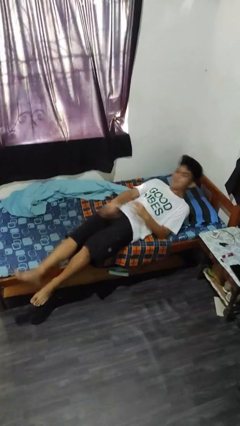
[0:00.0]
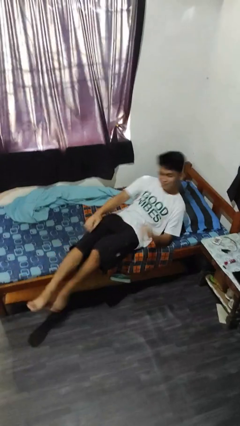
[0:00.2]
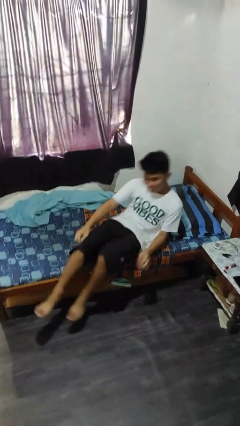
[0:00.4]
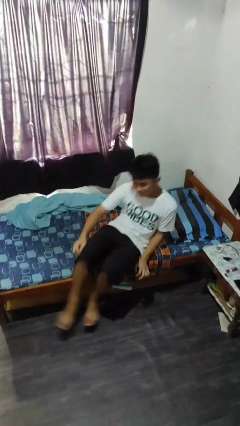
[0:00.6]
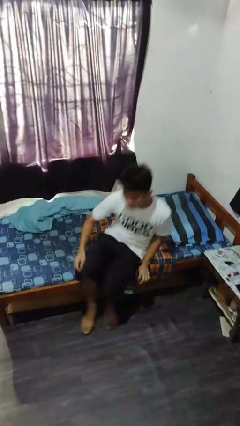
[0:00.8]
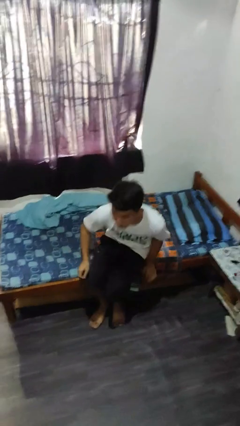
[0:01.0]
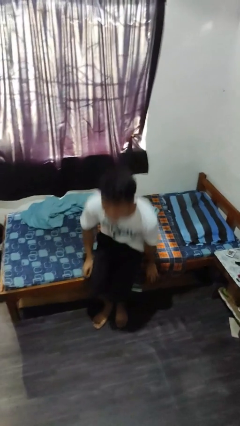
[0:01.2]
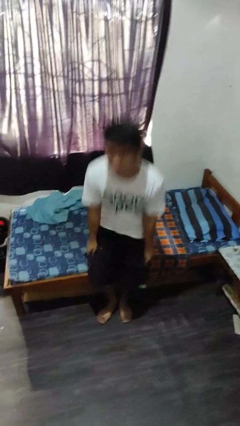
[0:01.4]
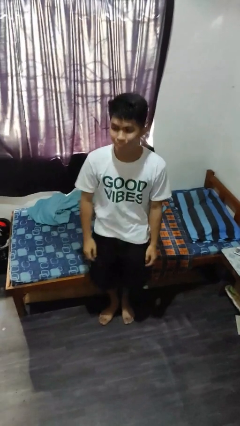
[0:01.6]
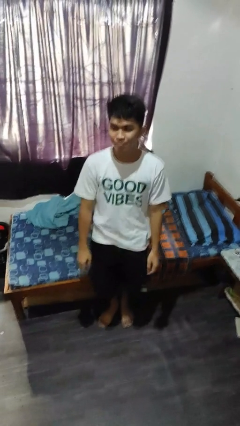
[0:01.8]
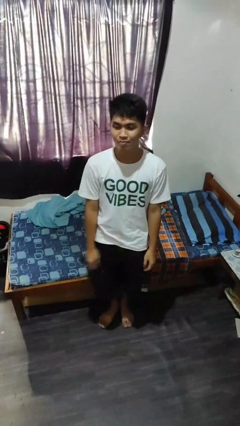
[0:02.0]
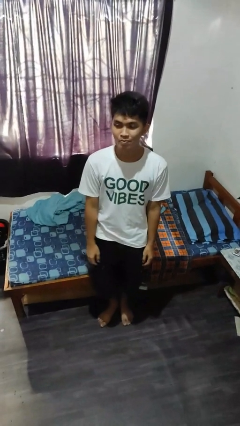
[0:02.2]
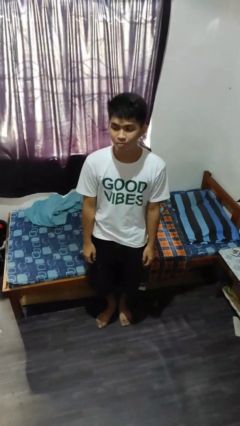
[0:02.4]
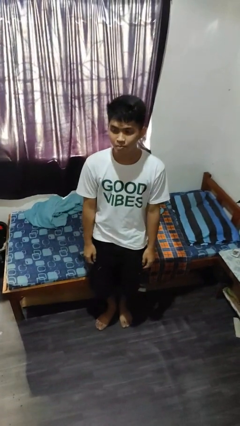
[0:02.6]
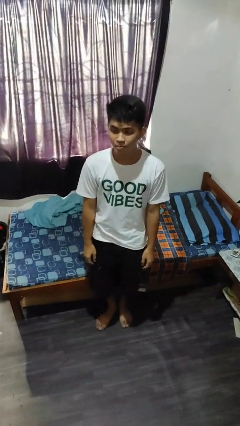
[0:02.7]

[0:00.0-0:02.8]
person stands up

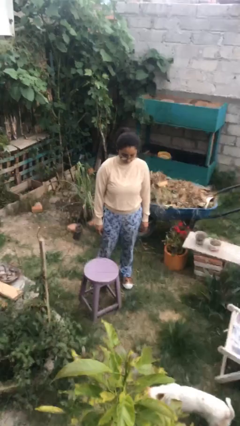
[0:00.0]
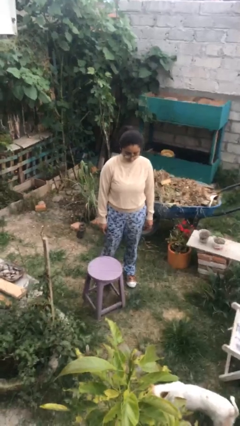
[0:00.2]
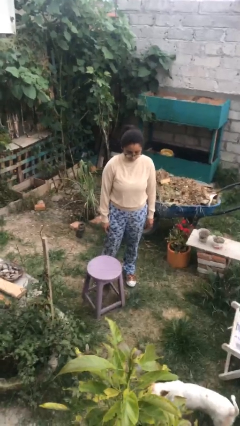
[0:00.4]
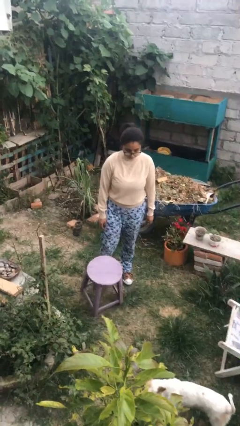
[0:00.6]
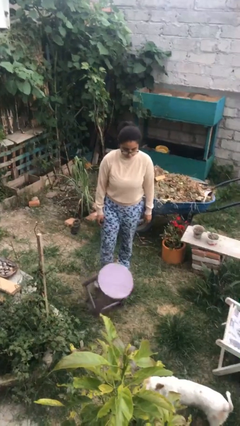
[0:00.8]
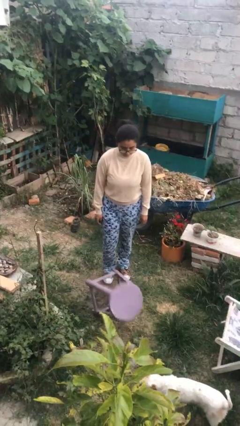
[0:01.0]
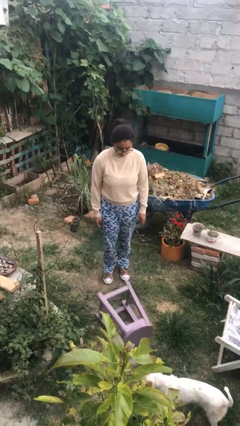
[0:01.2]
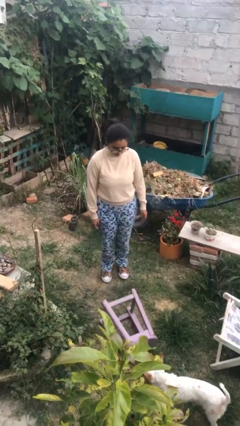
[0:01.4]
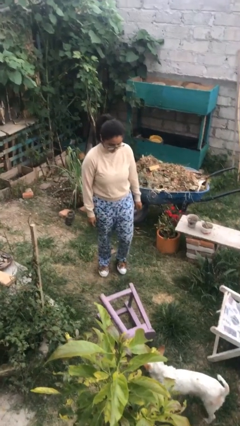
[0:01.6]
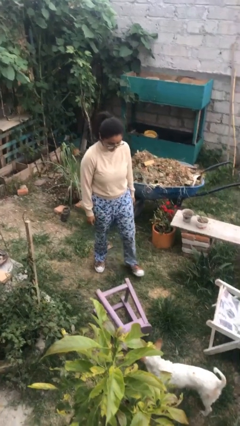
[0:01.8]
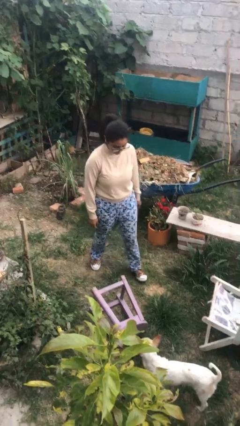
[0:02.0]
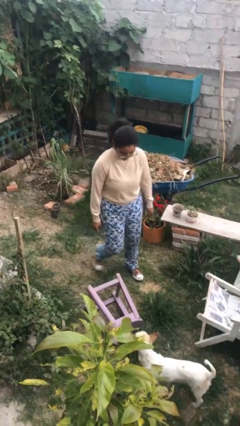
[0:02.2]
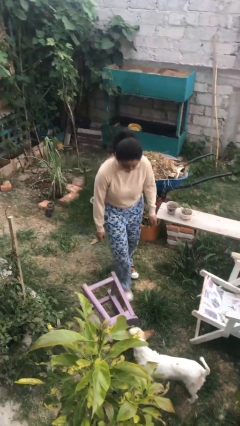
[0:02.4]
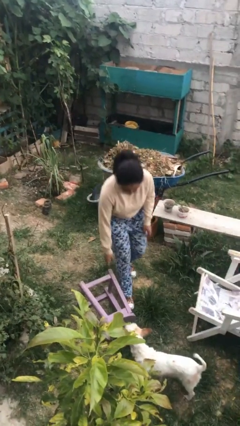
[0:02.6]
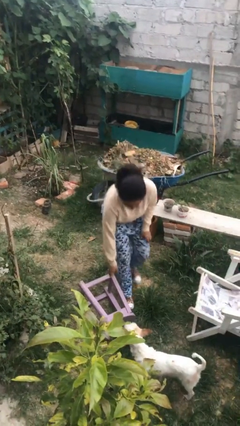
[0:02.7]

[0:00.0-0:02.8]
person knocks over furniture

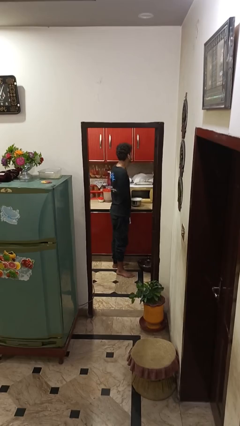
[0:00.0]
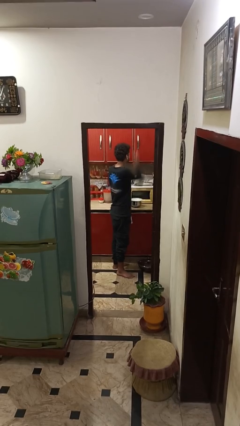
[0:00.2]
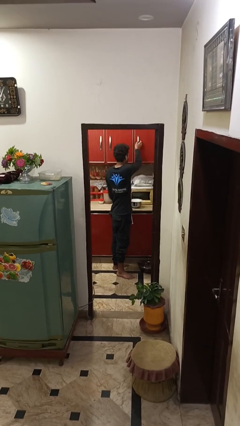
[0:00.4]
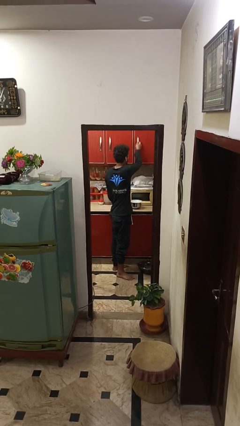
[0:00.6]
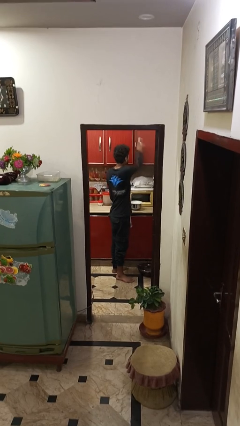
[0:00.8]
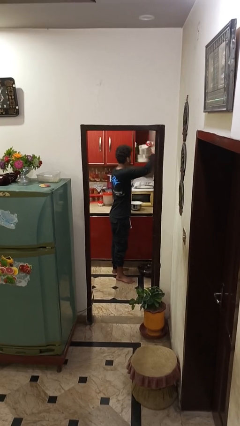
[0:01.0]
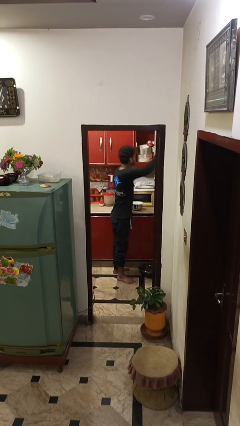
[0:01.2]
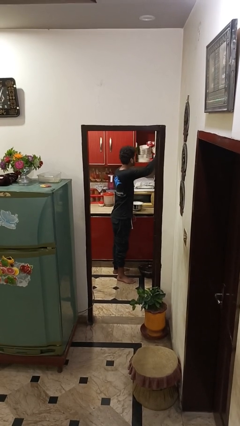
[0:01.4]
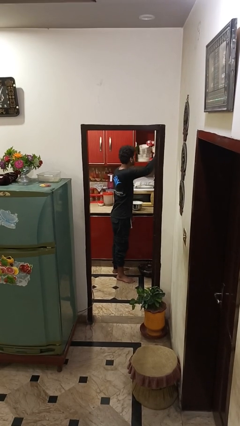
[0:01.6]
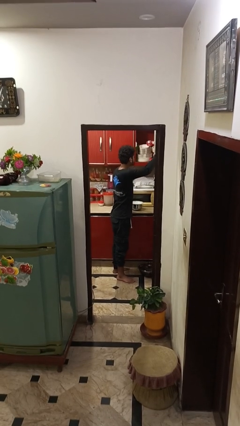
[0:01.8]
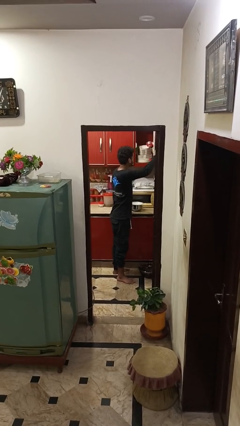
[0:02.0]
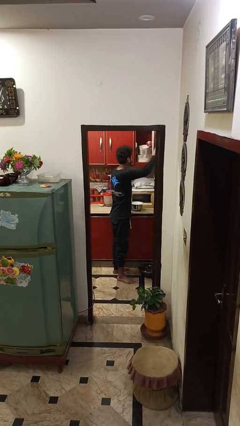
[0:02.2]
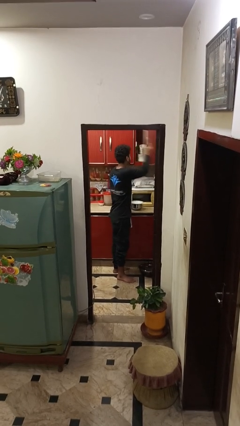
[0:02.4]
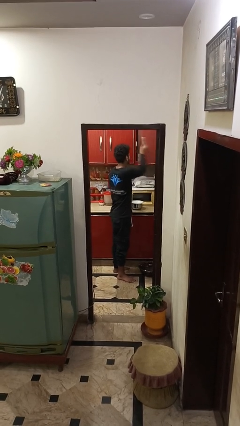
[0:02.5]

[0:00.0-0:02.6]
person opens cabinet

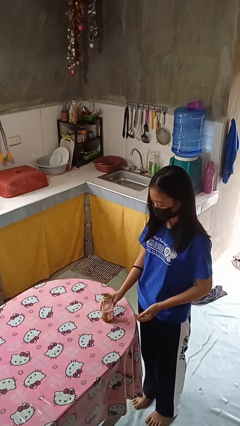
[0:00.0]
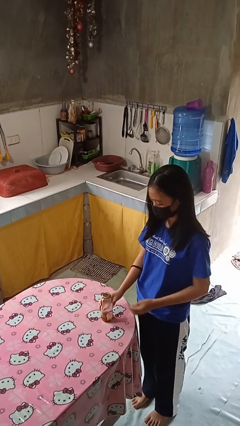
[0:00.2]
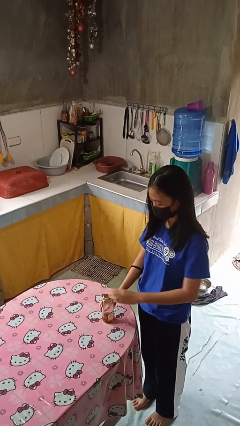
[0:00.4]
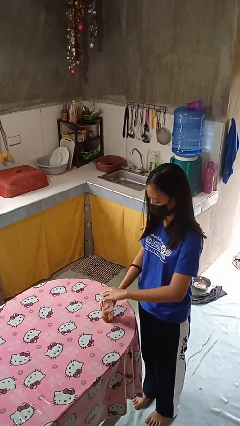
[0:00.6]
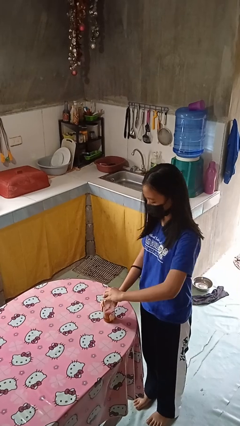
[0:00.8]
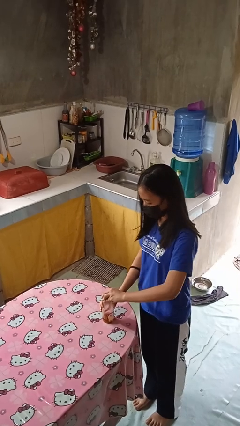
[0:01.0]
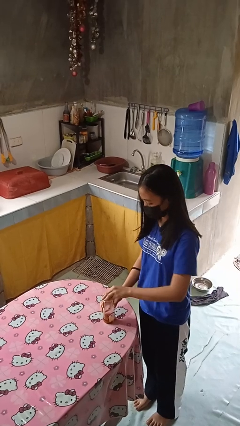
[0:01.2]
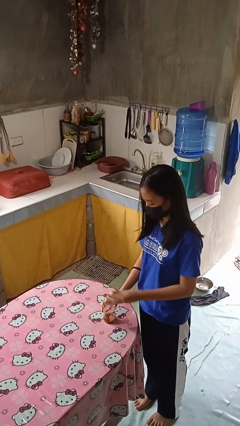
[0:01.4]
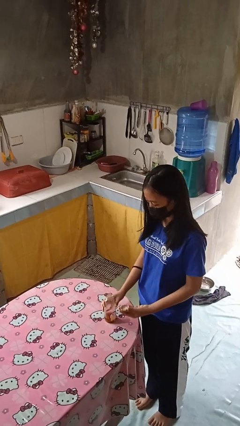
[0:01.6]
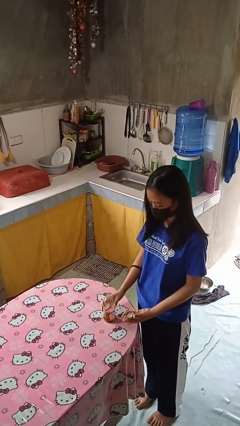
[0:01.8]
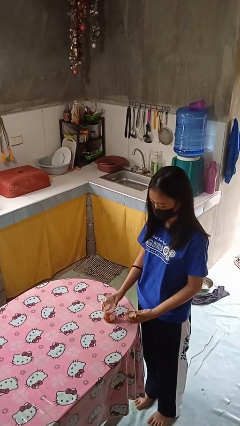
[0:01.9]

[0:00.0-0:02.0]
person opens jar

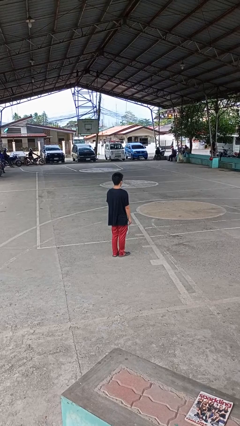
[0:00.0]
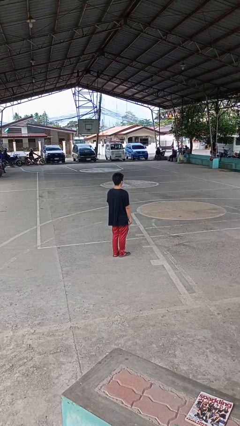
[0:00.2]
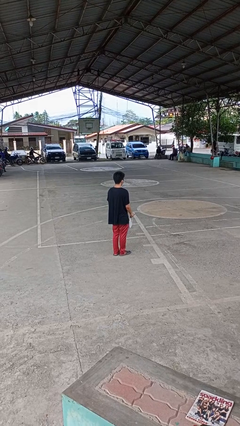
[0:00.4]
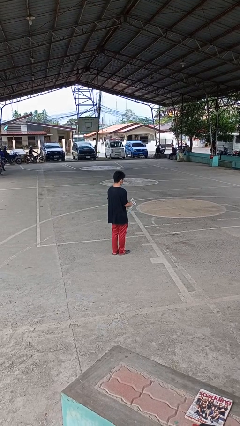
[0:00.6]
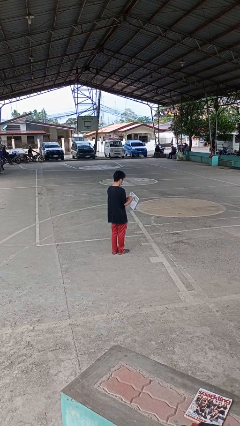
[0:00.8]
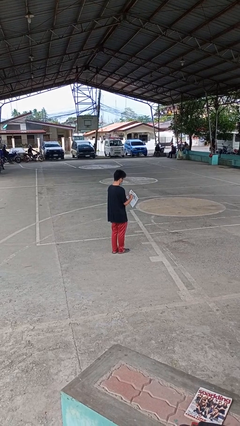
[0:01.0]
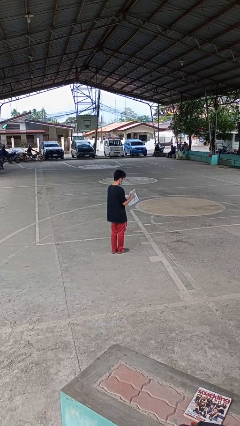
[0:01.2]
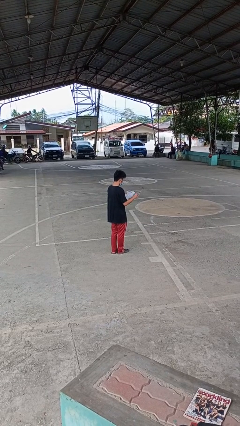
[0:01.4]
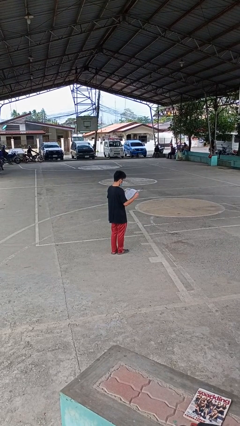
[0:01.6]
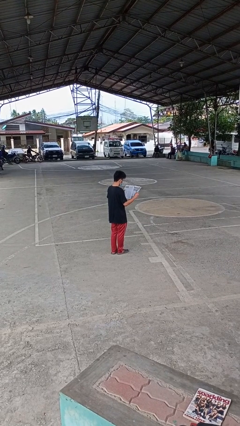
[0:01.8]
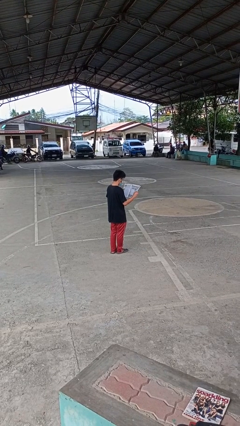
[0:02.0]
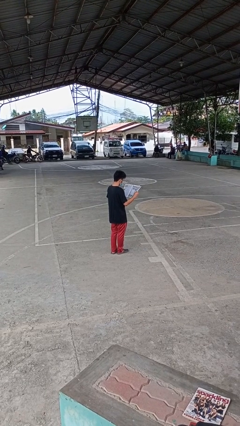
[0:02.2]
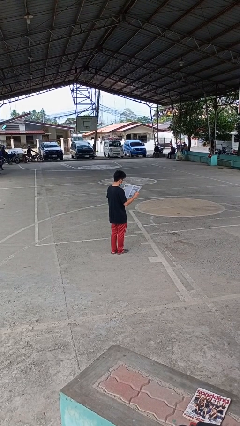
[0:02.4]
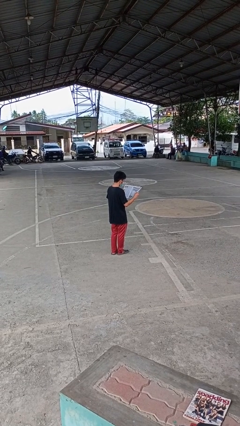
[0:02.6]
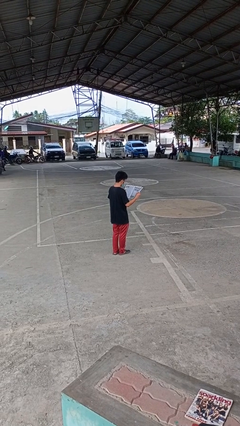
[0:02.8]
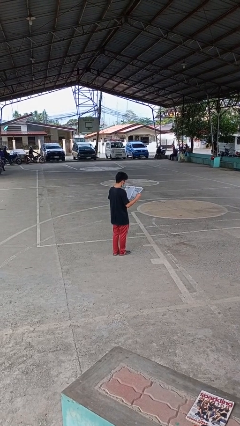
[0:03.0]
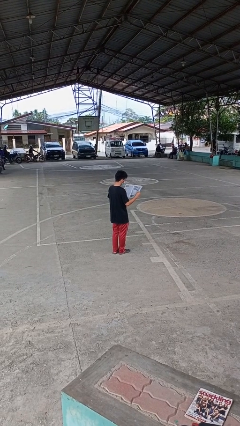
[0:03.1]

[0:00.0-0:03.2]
person reads newspaper

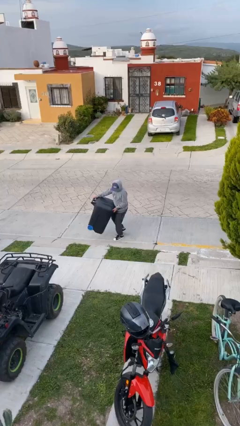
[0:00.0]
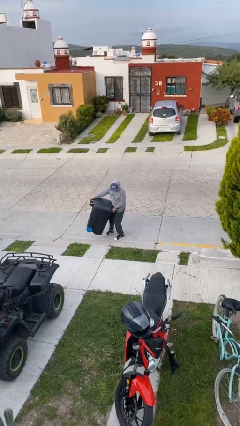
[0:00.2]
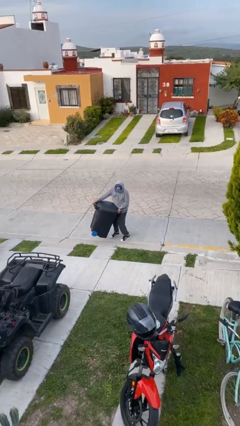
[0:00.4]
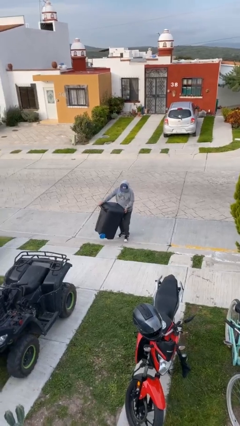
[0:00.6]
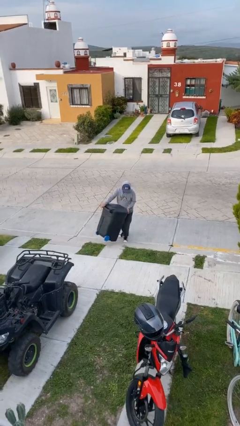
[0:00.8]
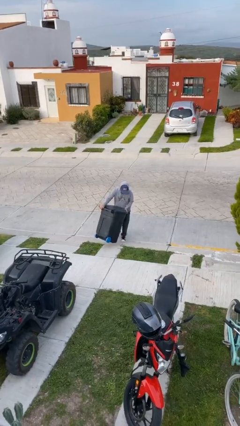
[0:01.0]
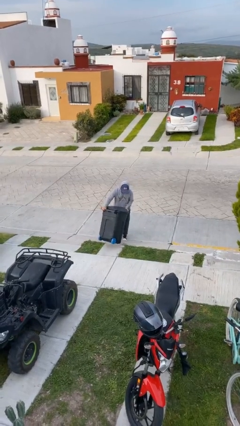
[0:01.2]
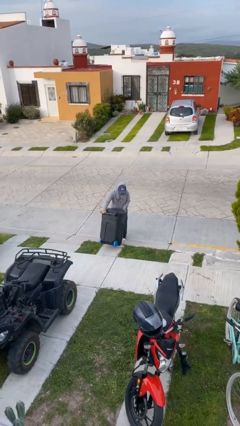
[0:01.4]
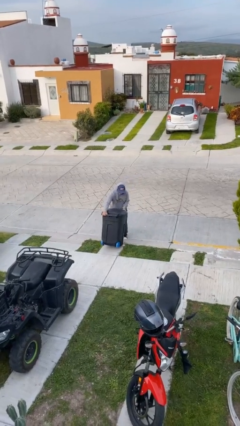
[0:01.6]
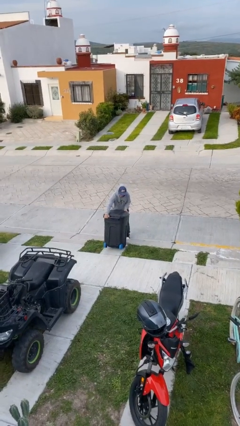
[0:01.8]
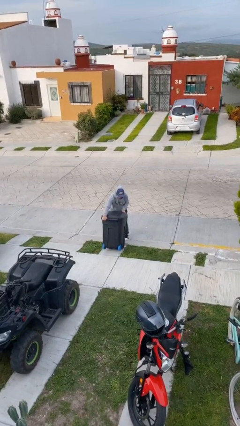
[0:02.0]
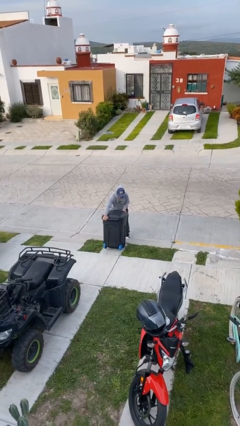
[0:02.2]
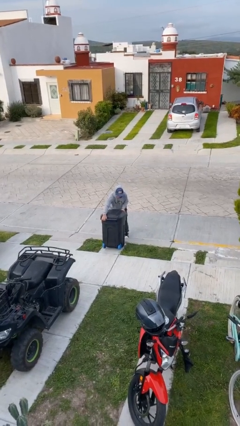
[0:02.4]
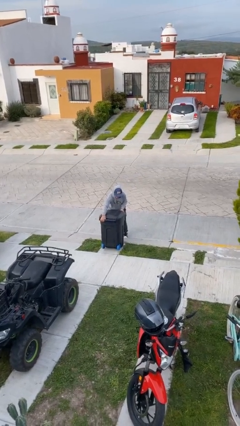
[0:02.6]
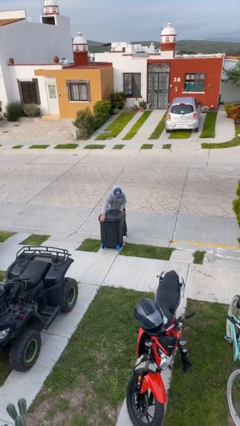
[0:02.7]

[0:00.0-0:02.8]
person puts down object on floor

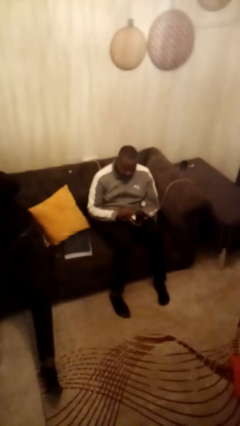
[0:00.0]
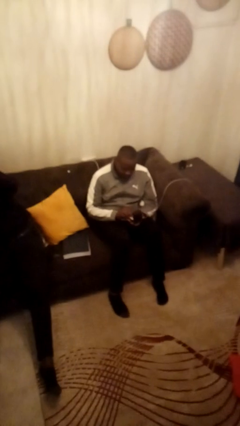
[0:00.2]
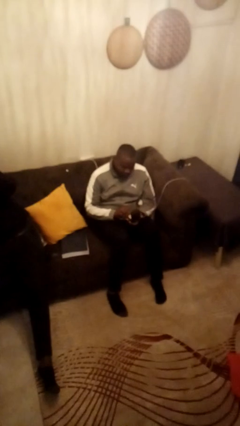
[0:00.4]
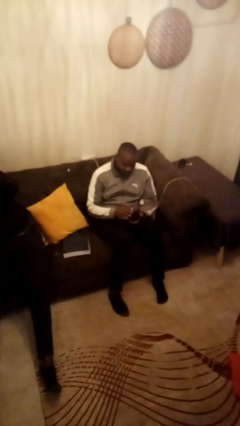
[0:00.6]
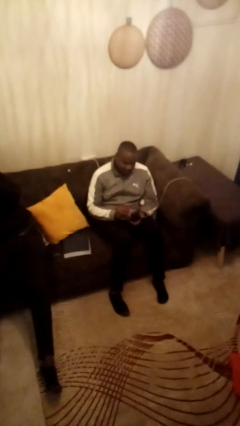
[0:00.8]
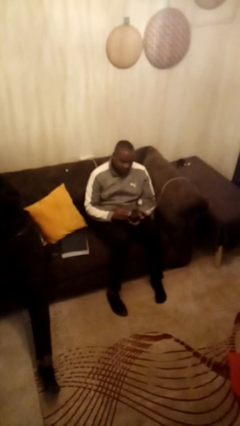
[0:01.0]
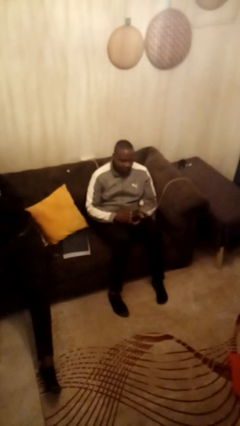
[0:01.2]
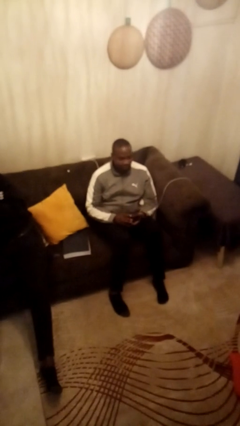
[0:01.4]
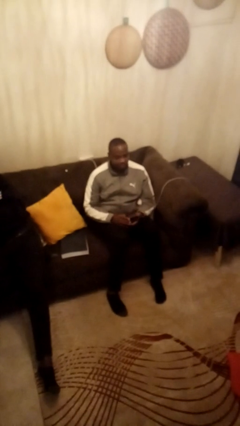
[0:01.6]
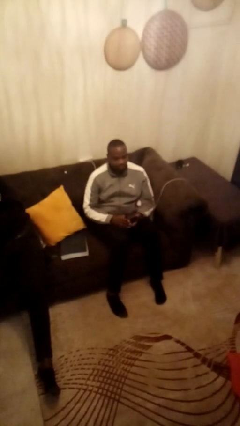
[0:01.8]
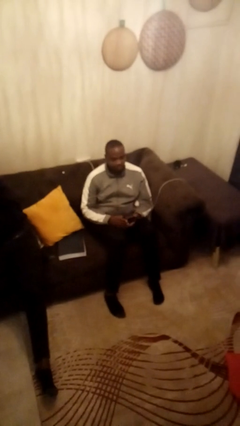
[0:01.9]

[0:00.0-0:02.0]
person closes jewelry box
